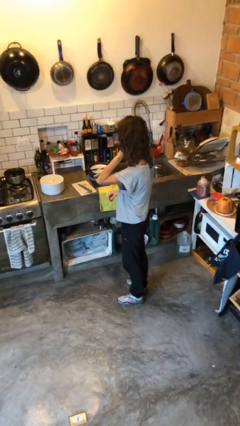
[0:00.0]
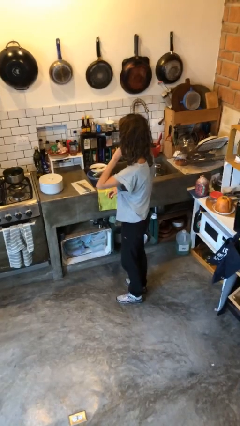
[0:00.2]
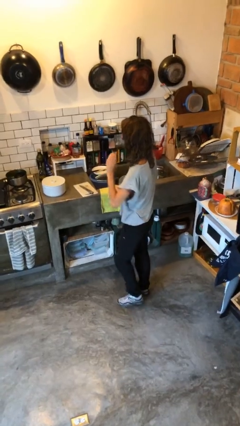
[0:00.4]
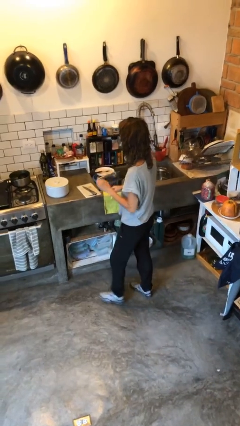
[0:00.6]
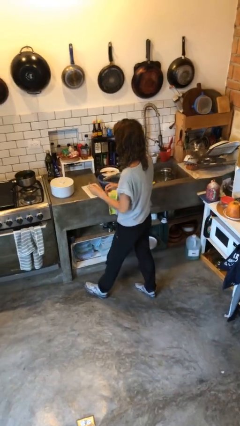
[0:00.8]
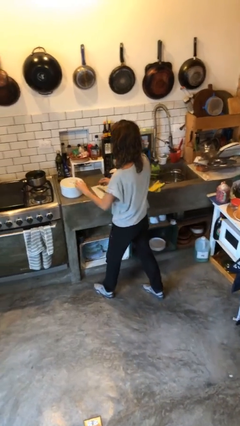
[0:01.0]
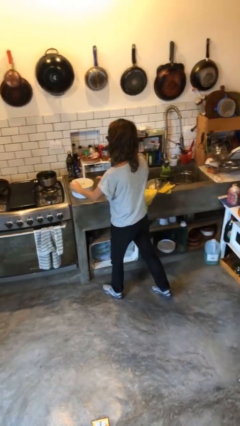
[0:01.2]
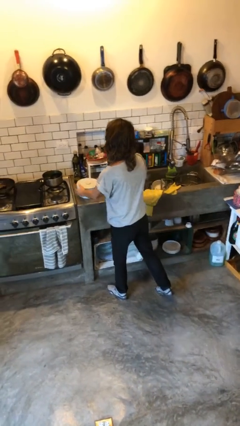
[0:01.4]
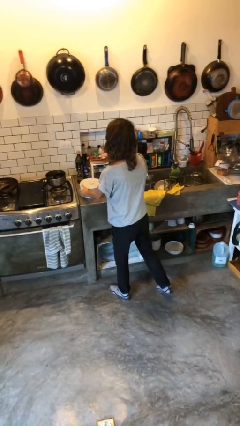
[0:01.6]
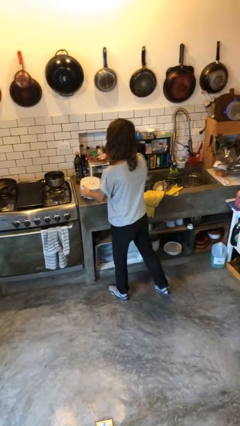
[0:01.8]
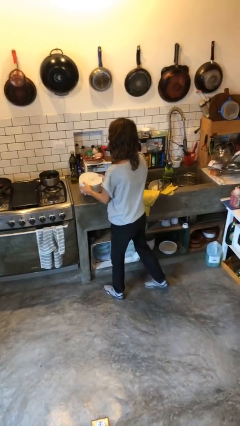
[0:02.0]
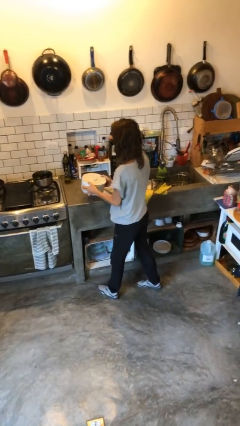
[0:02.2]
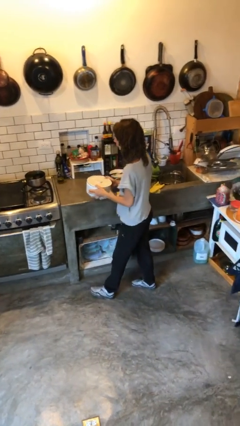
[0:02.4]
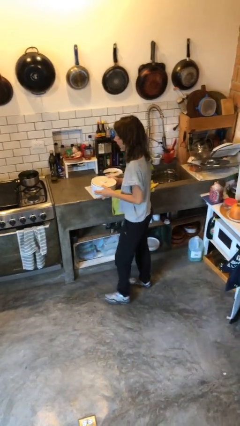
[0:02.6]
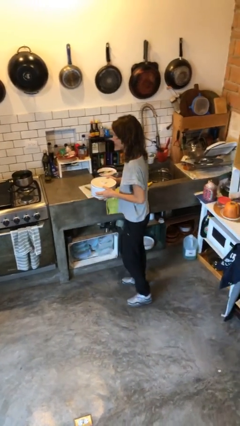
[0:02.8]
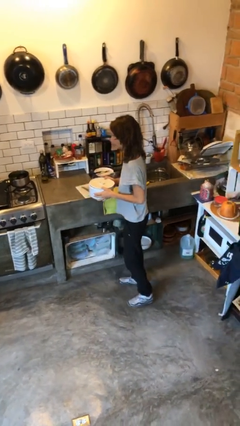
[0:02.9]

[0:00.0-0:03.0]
person picks up object from countertop

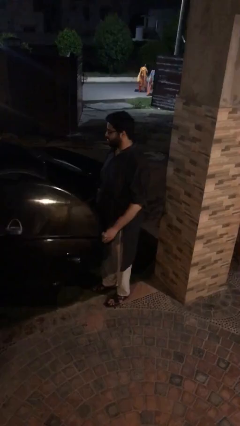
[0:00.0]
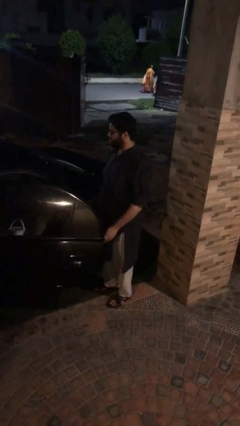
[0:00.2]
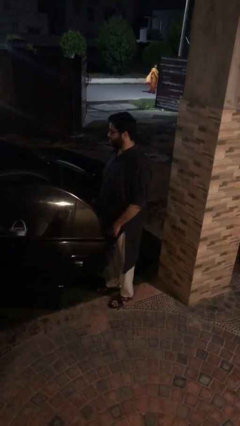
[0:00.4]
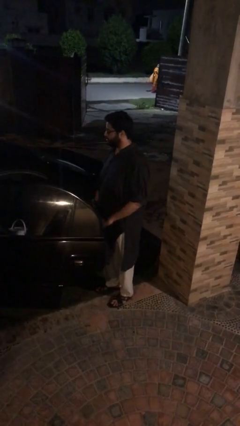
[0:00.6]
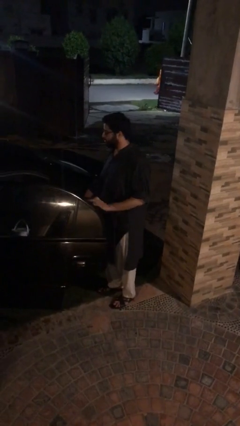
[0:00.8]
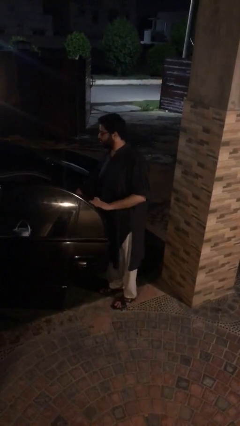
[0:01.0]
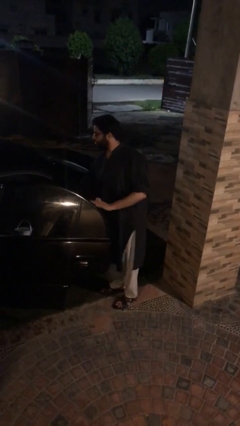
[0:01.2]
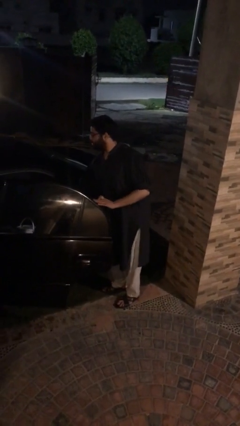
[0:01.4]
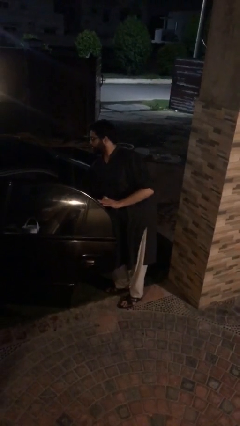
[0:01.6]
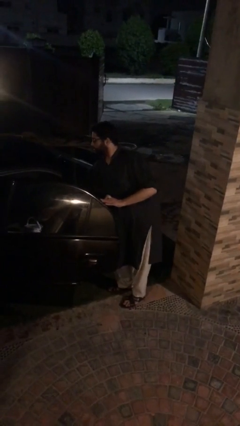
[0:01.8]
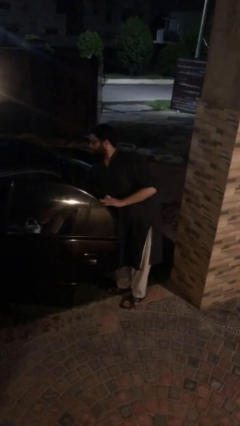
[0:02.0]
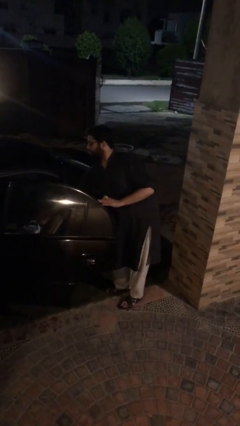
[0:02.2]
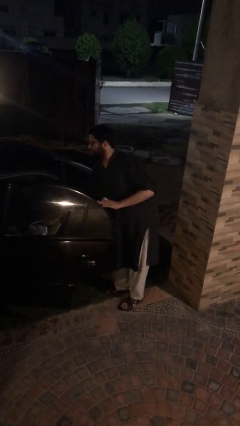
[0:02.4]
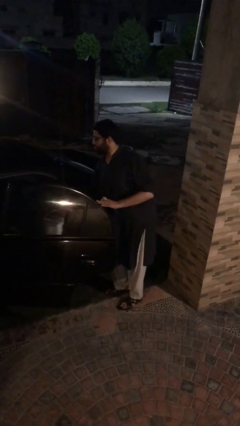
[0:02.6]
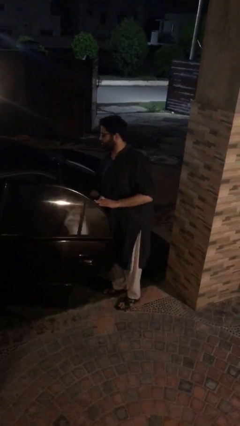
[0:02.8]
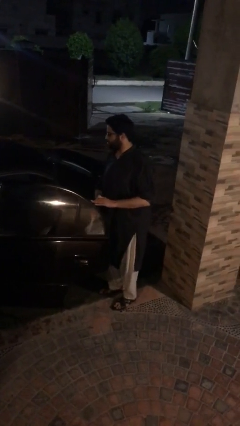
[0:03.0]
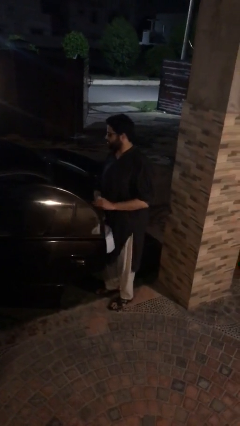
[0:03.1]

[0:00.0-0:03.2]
person unloads car

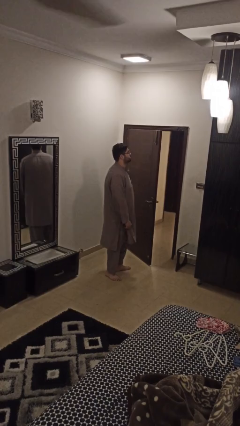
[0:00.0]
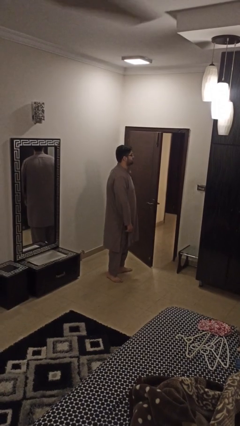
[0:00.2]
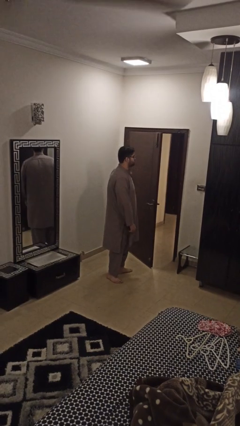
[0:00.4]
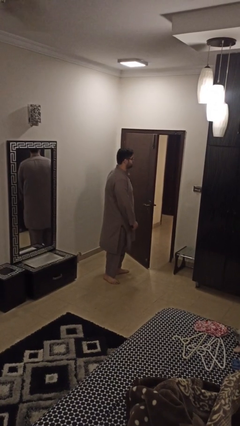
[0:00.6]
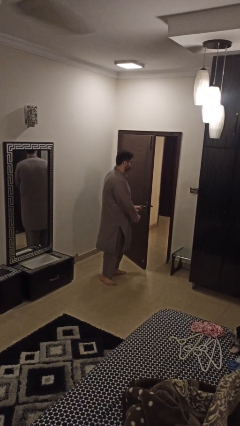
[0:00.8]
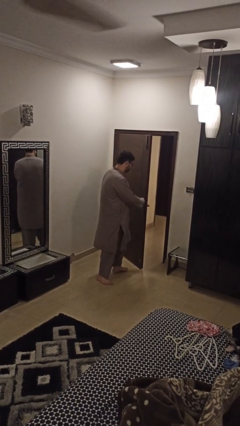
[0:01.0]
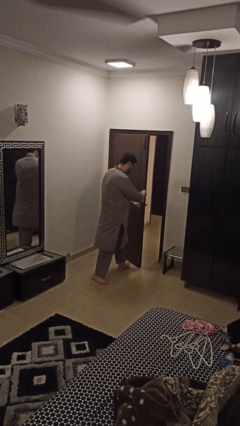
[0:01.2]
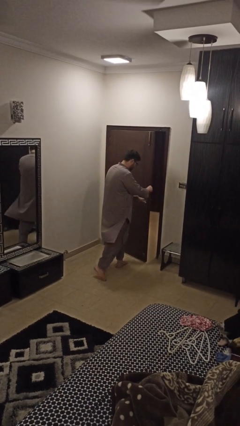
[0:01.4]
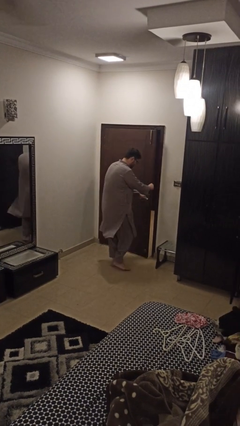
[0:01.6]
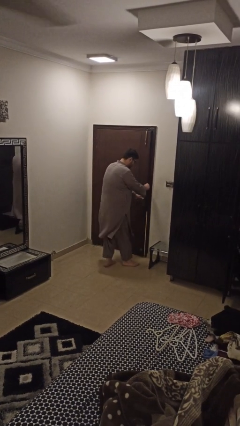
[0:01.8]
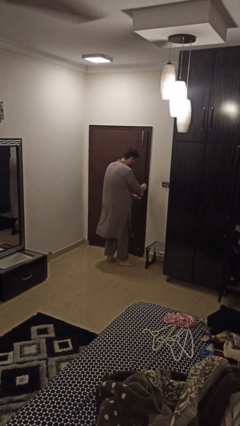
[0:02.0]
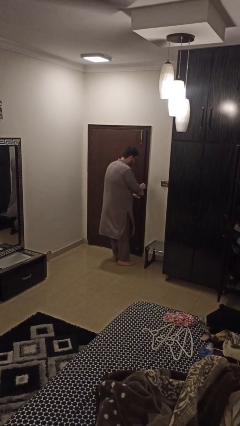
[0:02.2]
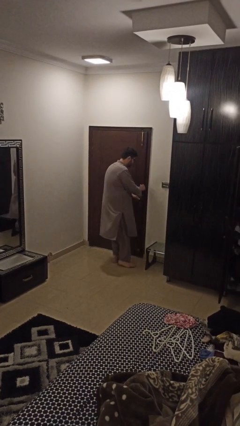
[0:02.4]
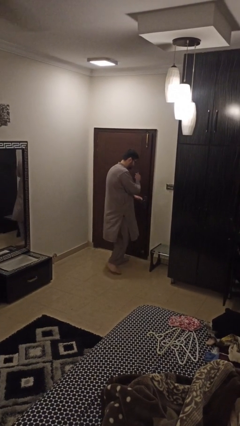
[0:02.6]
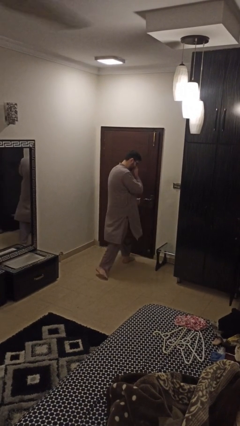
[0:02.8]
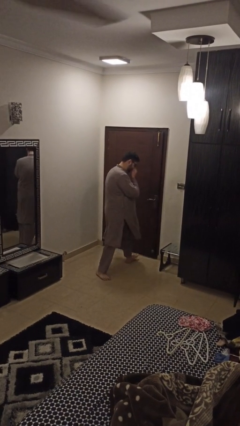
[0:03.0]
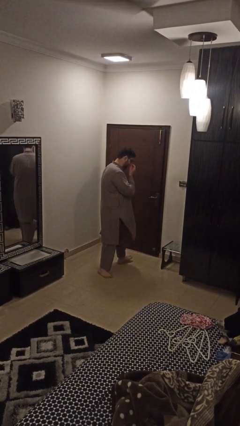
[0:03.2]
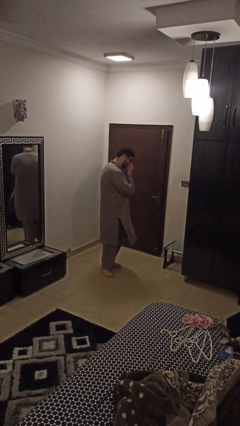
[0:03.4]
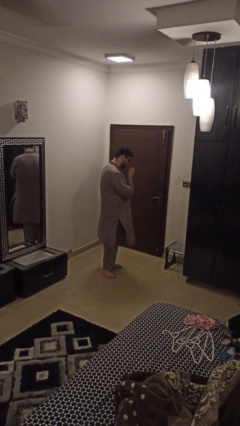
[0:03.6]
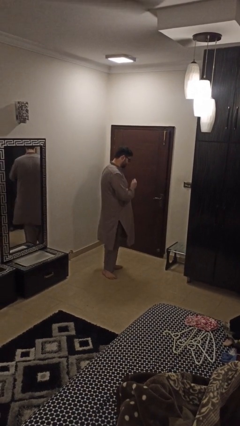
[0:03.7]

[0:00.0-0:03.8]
person closes facility door

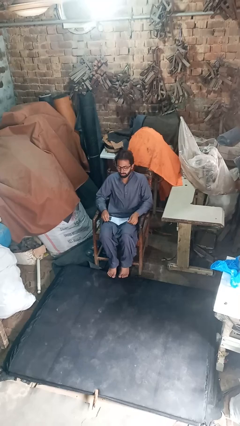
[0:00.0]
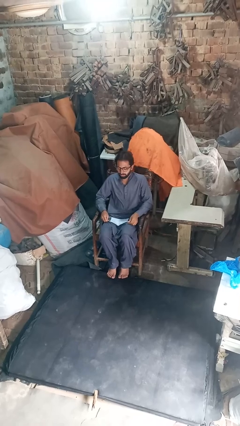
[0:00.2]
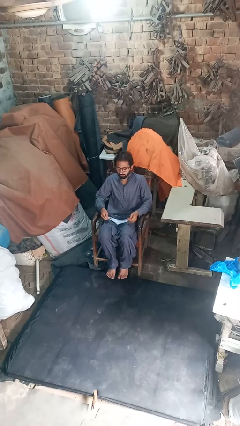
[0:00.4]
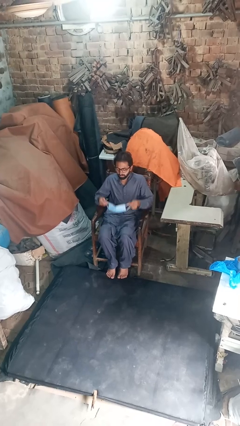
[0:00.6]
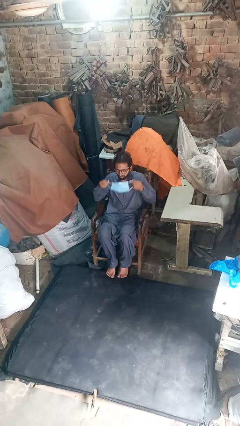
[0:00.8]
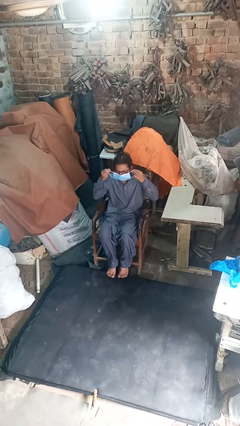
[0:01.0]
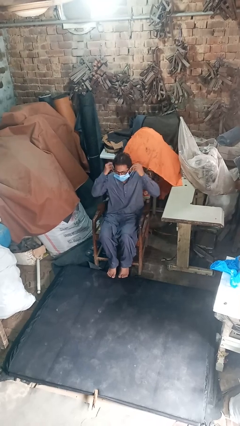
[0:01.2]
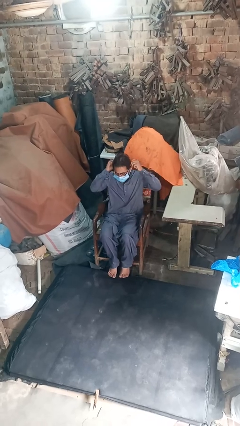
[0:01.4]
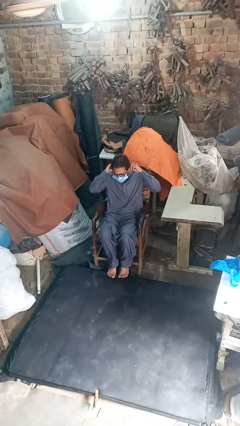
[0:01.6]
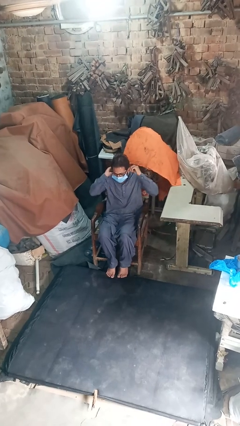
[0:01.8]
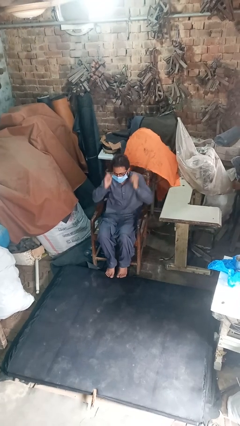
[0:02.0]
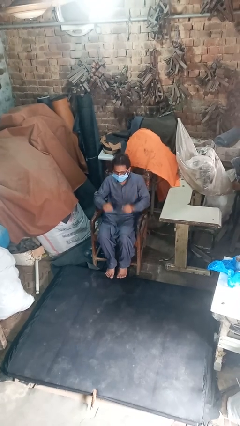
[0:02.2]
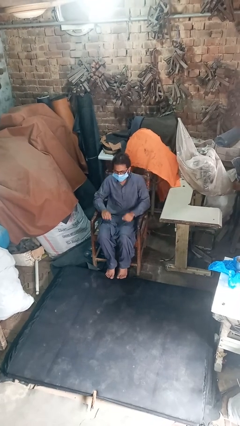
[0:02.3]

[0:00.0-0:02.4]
person puts on facemask

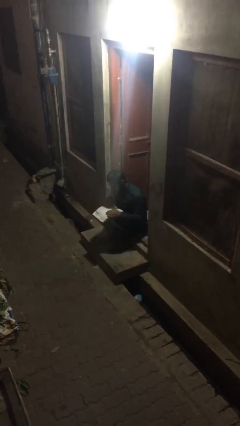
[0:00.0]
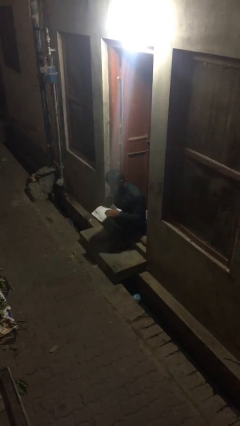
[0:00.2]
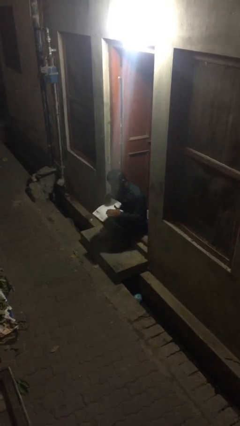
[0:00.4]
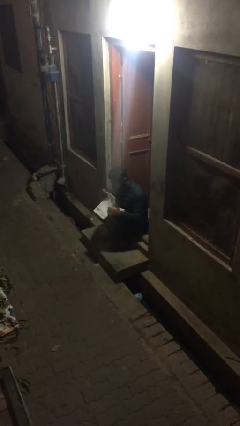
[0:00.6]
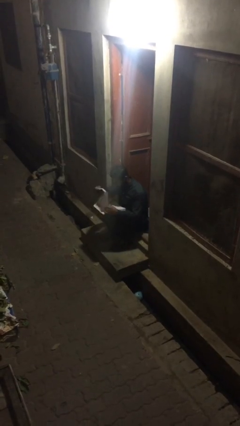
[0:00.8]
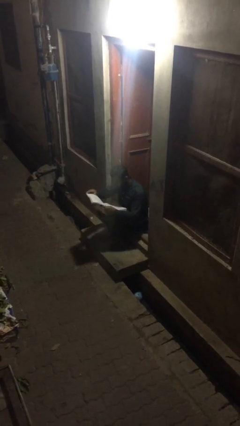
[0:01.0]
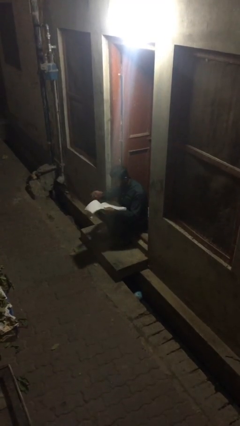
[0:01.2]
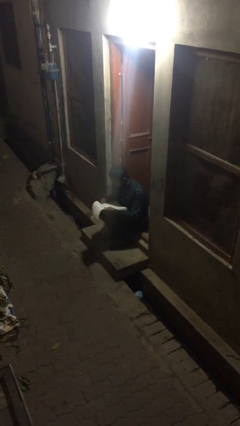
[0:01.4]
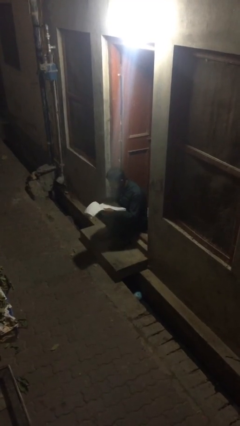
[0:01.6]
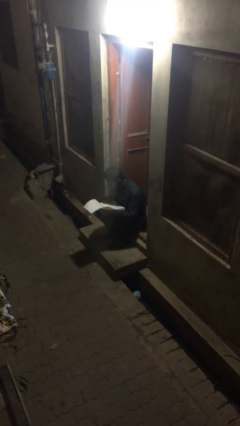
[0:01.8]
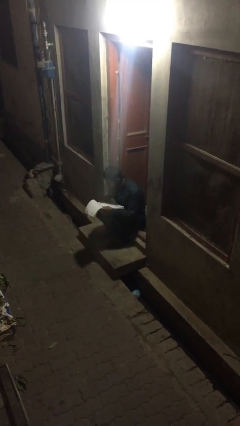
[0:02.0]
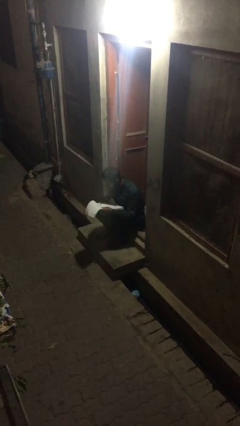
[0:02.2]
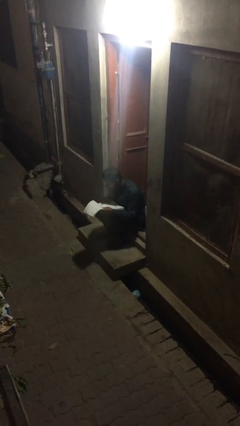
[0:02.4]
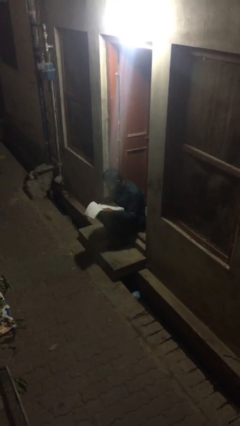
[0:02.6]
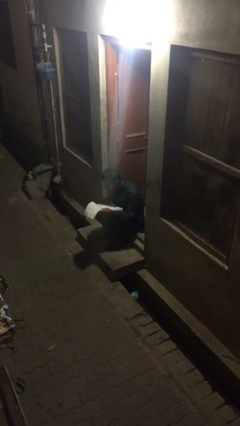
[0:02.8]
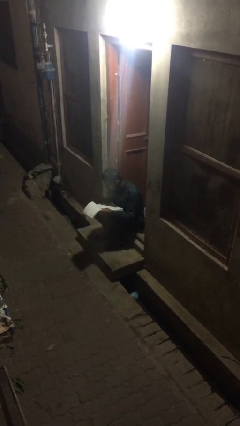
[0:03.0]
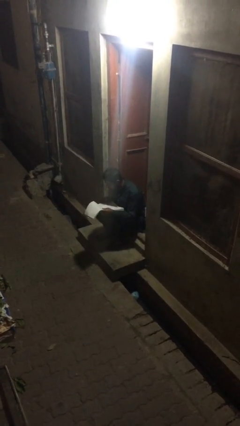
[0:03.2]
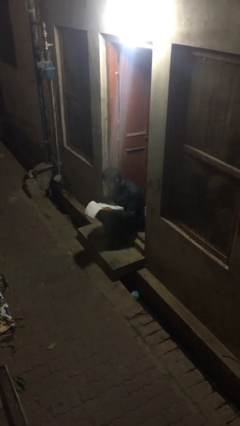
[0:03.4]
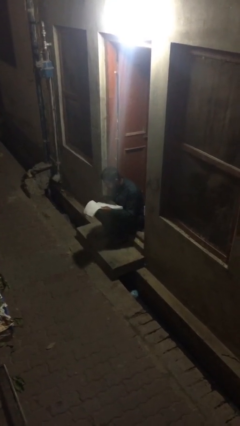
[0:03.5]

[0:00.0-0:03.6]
person reads document

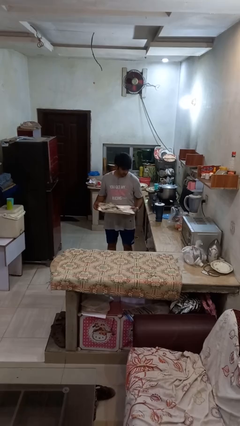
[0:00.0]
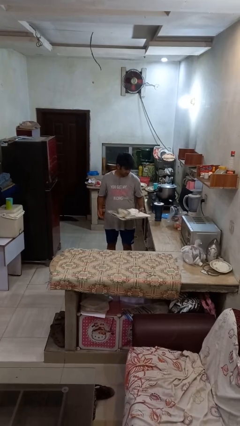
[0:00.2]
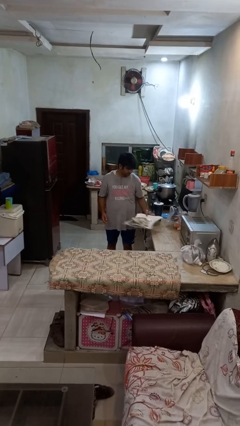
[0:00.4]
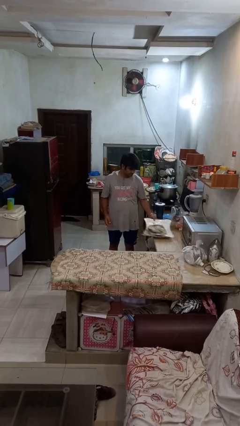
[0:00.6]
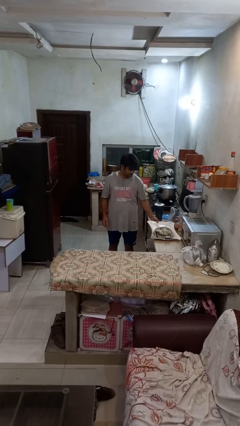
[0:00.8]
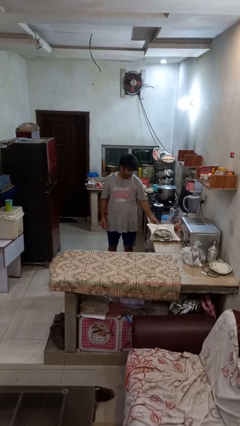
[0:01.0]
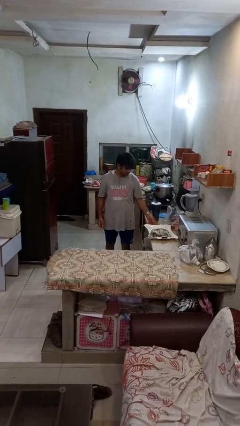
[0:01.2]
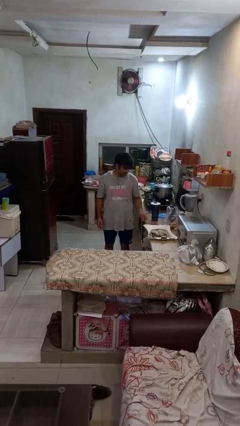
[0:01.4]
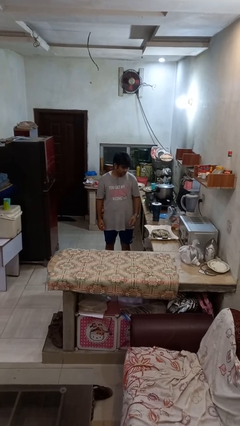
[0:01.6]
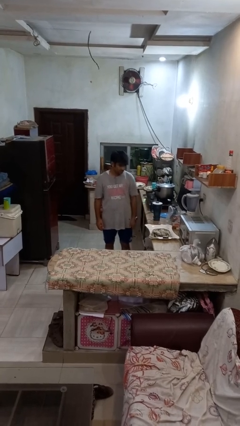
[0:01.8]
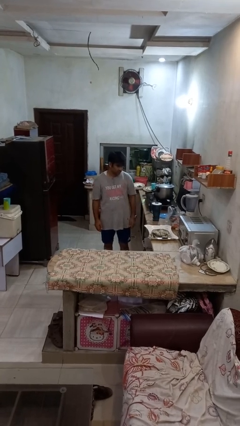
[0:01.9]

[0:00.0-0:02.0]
person puts down object on countertop
